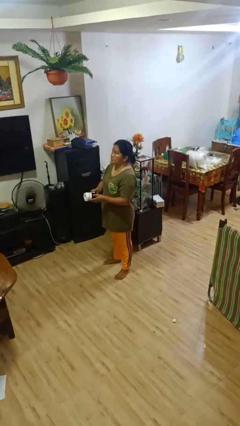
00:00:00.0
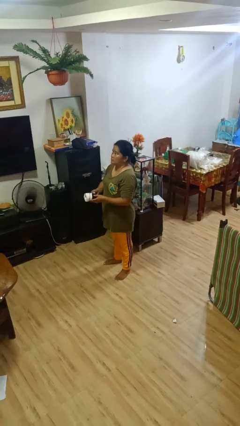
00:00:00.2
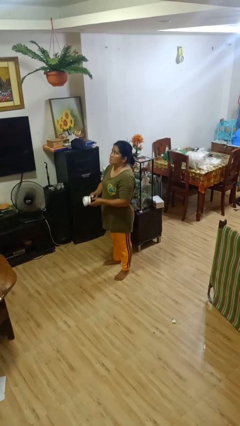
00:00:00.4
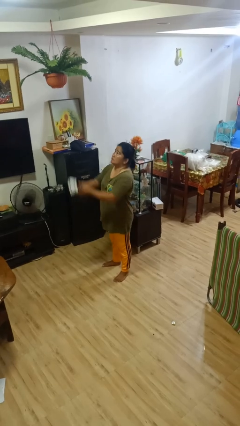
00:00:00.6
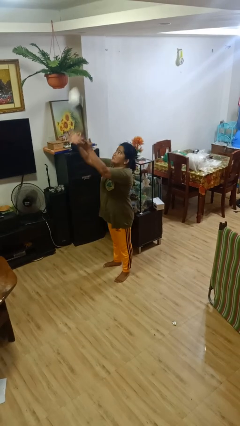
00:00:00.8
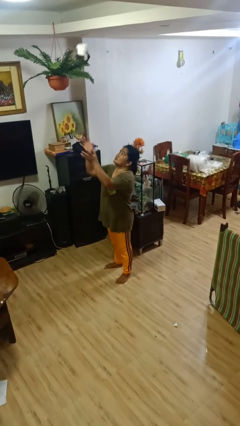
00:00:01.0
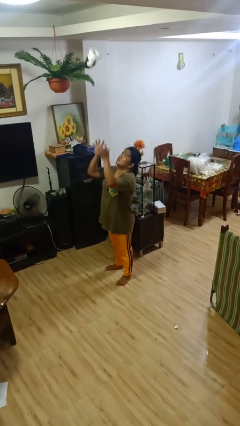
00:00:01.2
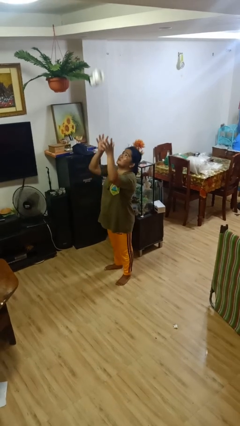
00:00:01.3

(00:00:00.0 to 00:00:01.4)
person drops object

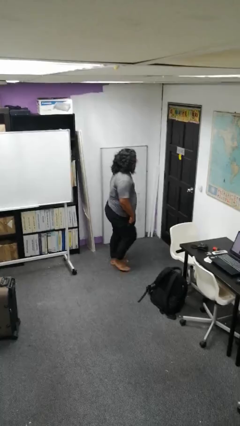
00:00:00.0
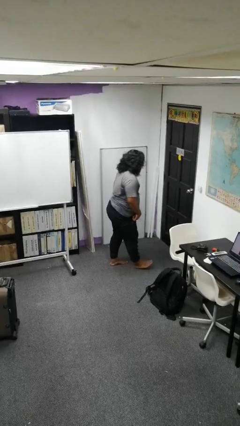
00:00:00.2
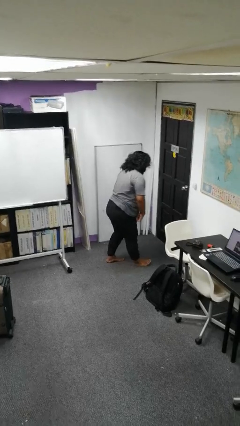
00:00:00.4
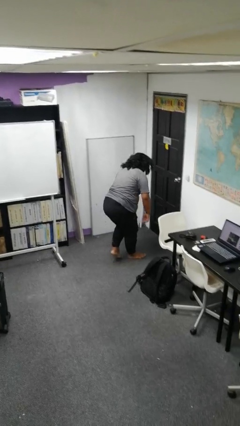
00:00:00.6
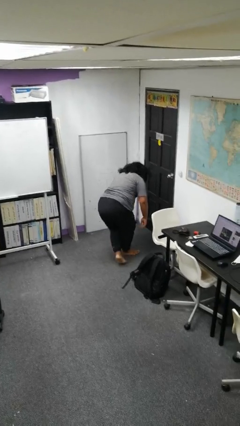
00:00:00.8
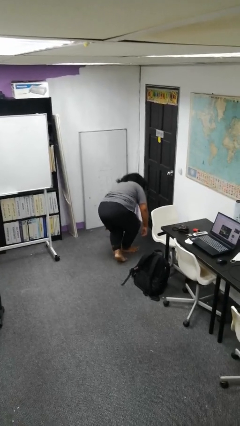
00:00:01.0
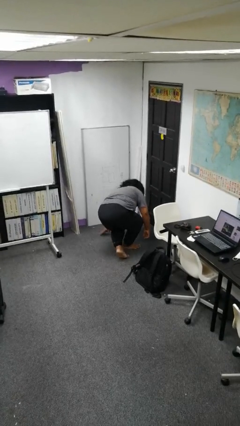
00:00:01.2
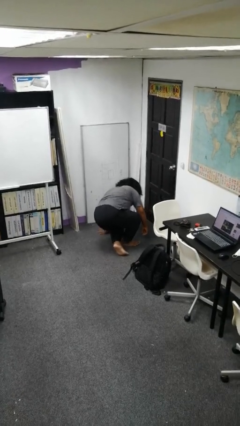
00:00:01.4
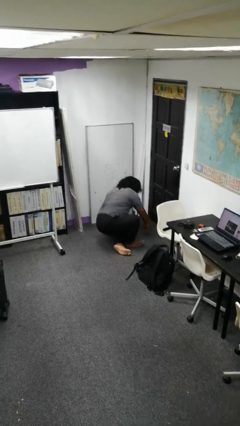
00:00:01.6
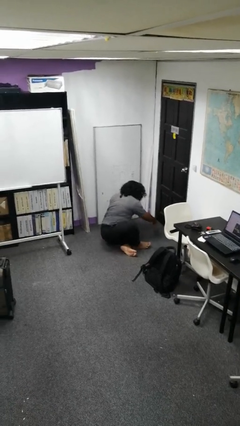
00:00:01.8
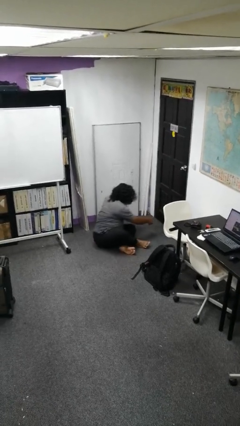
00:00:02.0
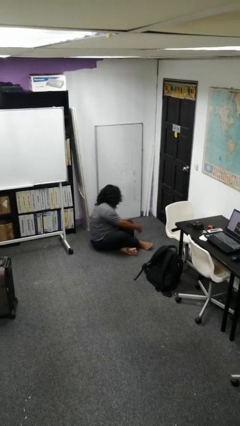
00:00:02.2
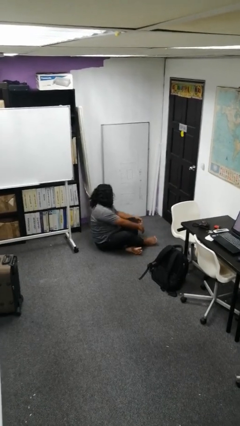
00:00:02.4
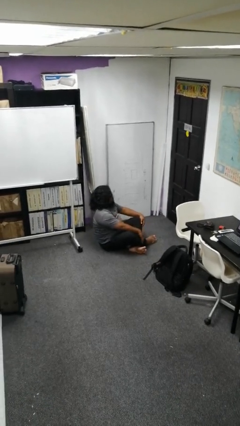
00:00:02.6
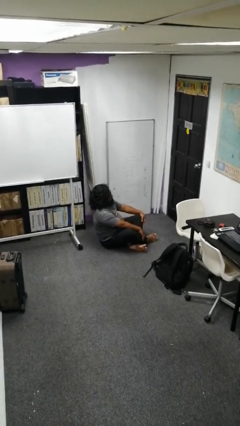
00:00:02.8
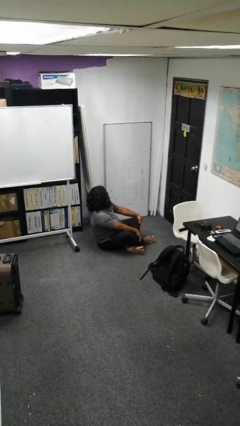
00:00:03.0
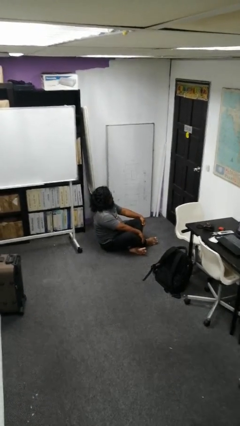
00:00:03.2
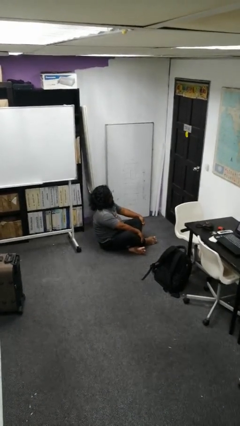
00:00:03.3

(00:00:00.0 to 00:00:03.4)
person sits crisscross

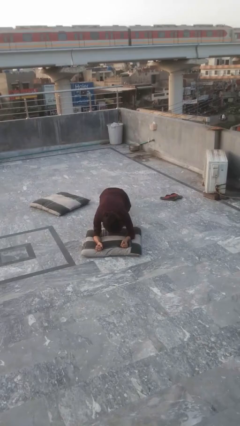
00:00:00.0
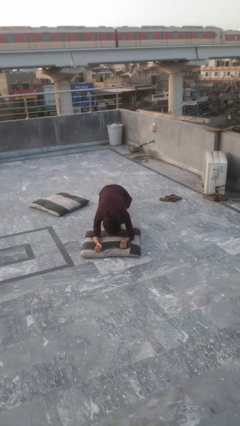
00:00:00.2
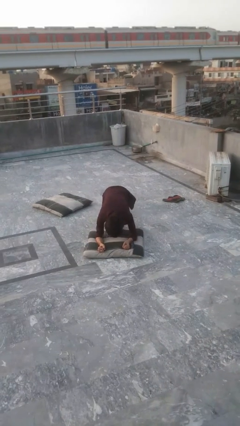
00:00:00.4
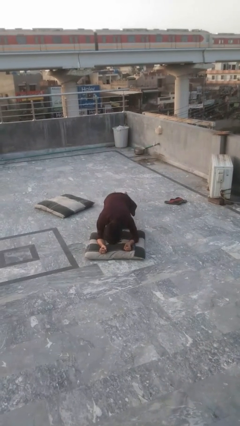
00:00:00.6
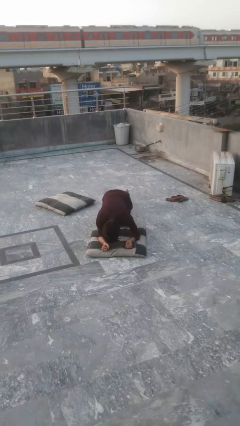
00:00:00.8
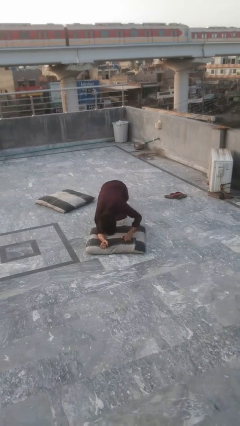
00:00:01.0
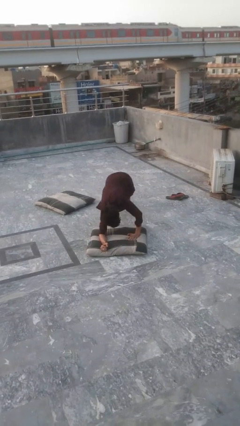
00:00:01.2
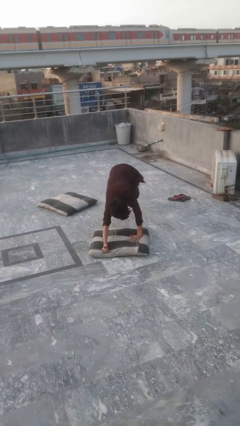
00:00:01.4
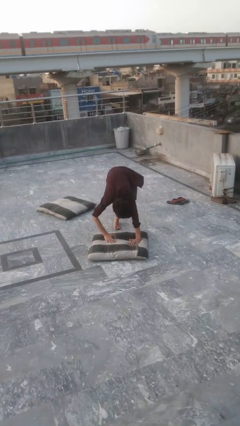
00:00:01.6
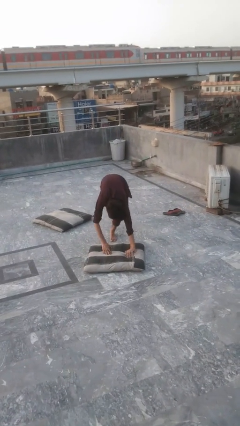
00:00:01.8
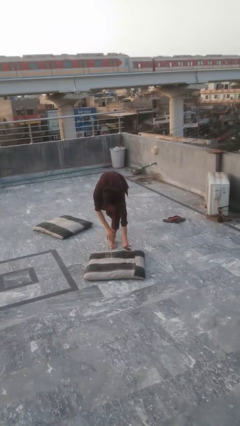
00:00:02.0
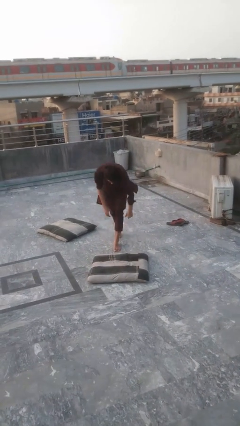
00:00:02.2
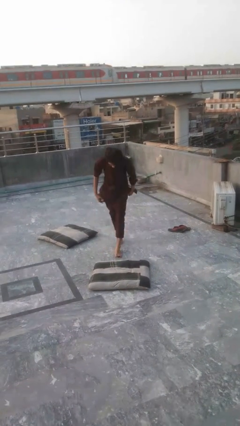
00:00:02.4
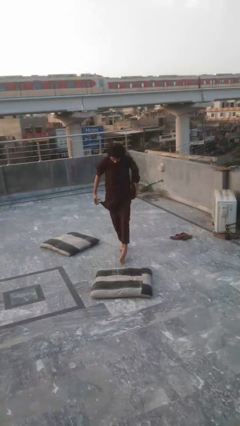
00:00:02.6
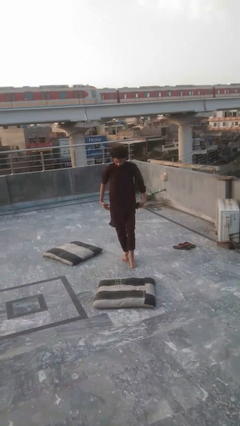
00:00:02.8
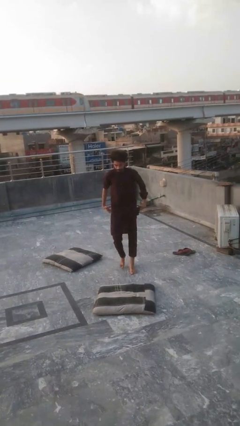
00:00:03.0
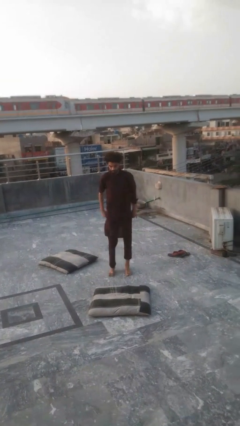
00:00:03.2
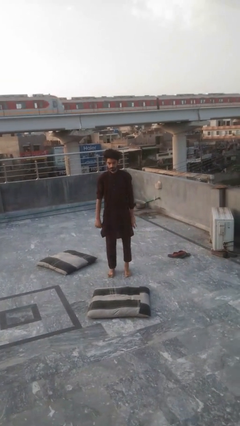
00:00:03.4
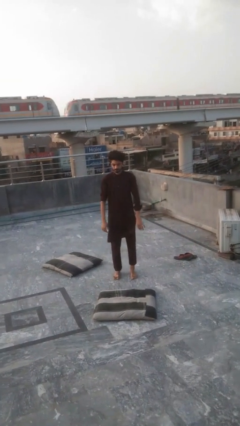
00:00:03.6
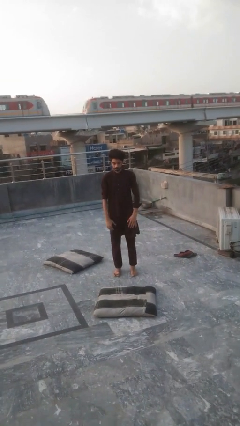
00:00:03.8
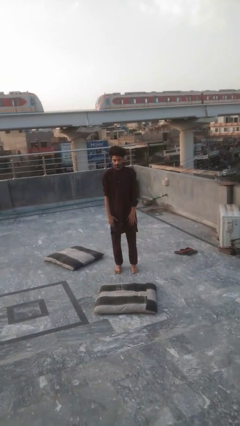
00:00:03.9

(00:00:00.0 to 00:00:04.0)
person stands up from floor

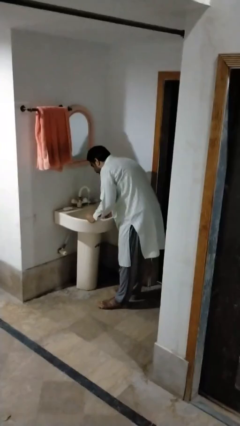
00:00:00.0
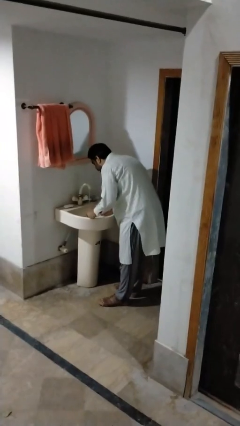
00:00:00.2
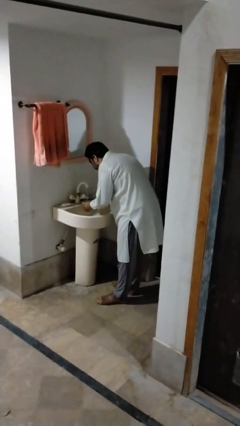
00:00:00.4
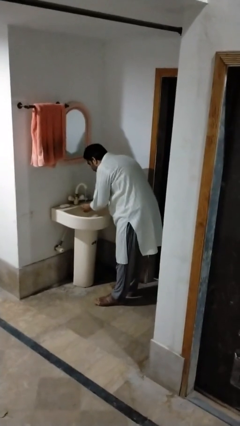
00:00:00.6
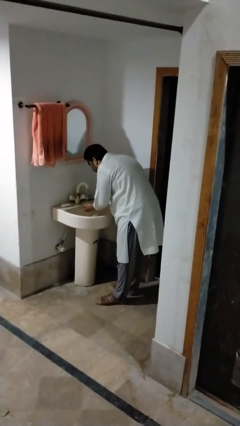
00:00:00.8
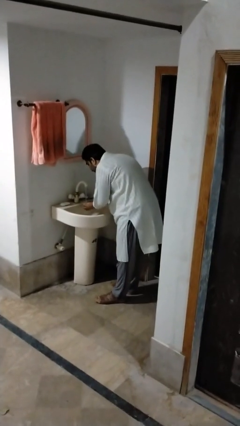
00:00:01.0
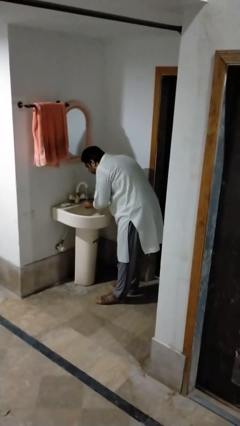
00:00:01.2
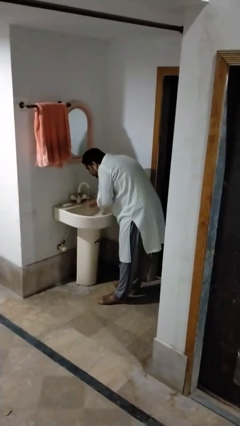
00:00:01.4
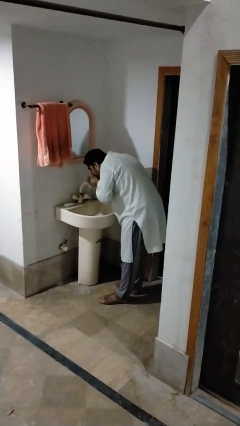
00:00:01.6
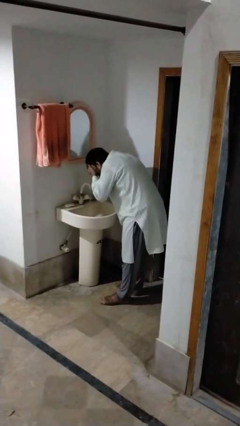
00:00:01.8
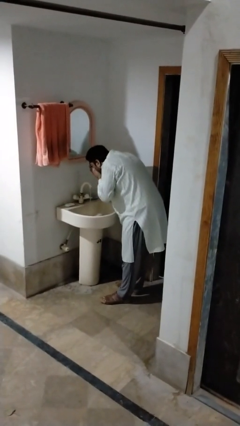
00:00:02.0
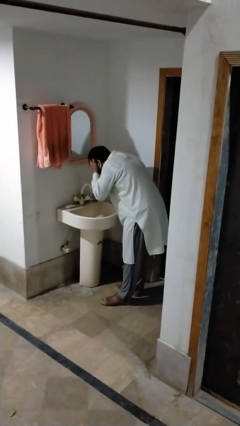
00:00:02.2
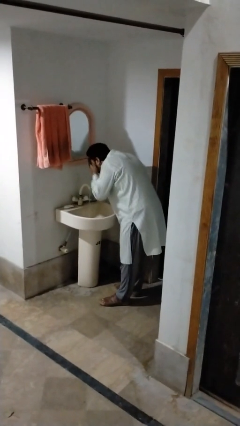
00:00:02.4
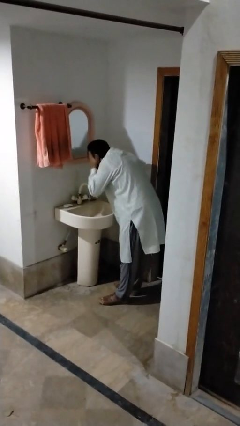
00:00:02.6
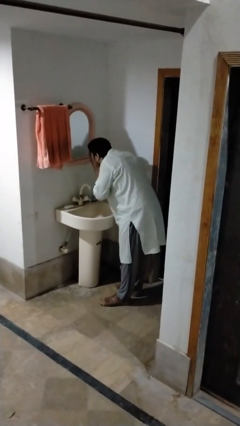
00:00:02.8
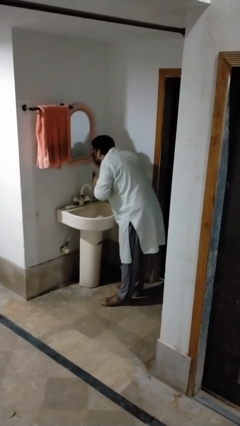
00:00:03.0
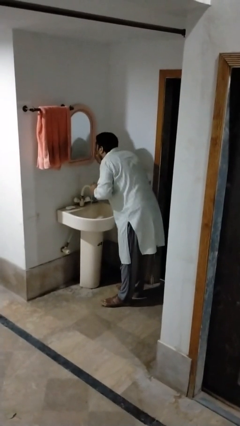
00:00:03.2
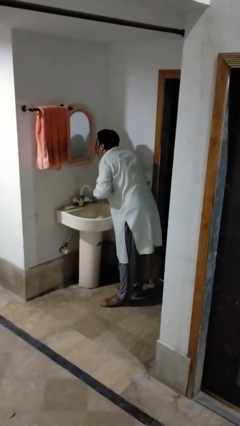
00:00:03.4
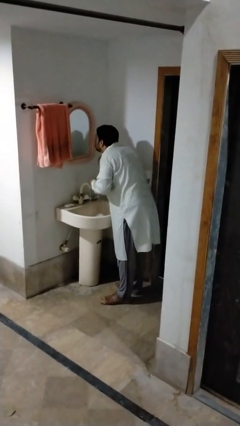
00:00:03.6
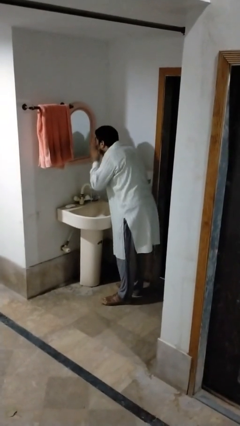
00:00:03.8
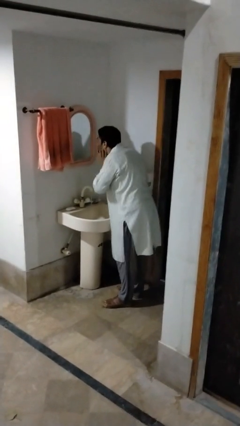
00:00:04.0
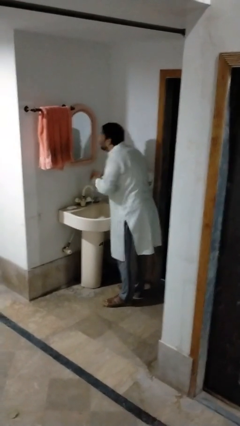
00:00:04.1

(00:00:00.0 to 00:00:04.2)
person washes face

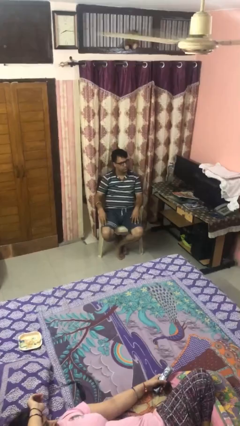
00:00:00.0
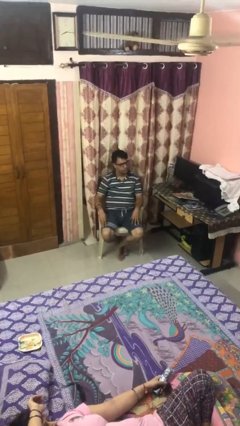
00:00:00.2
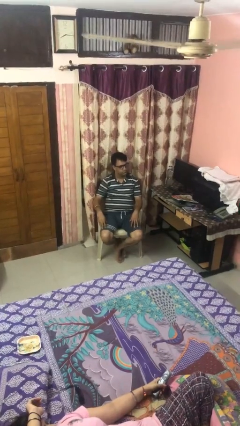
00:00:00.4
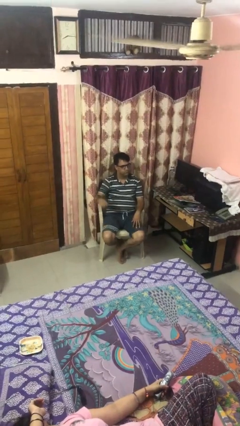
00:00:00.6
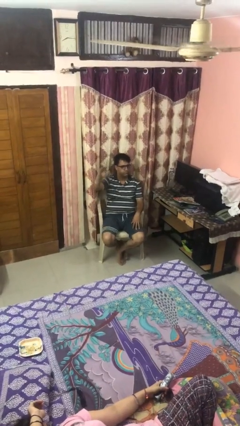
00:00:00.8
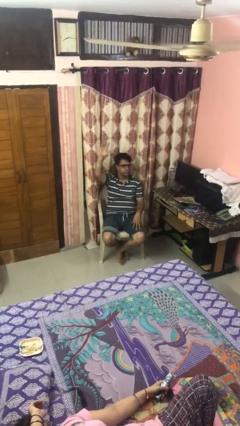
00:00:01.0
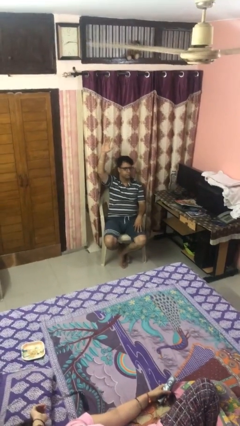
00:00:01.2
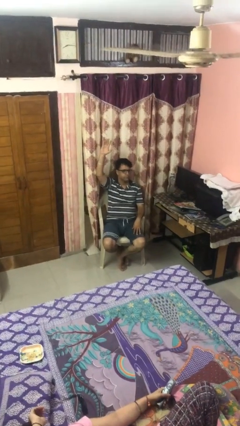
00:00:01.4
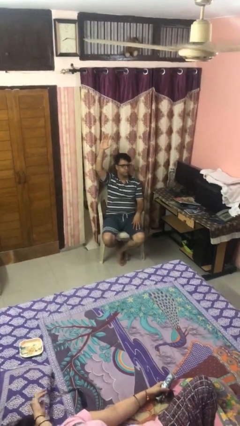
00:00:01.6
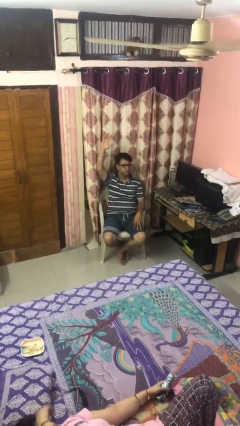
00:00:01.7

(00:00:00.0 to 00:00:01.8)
person gestures raise hand

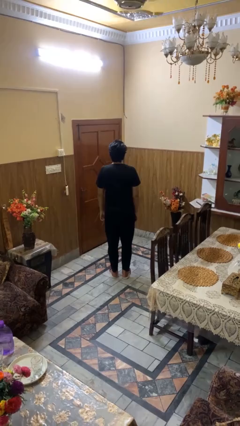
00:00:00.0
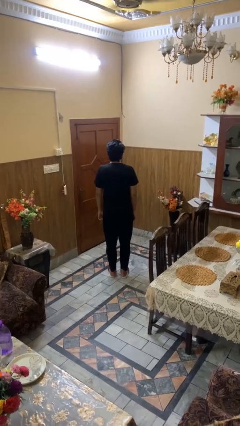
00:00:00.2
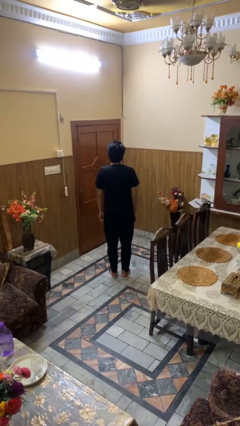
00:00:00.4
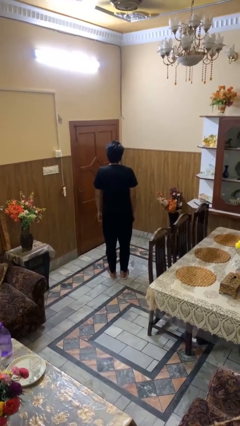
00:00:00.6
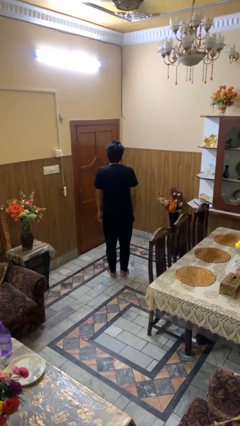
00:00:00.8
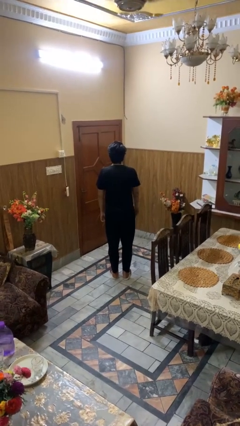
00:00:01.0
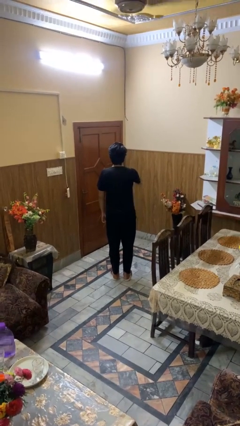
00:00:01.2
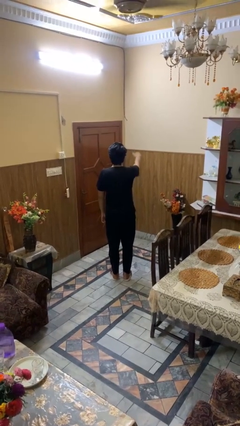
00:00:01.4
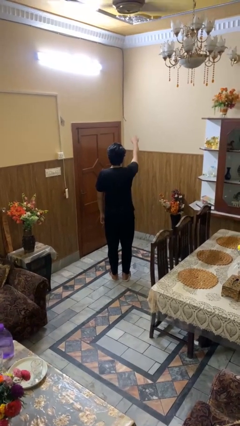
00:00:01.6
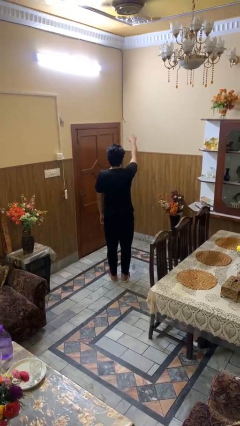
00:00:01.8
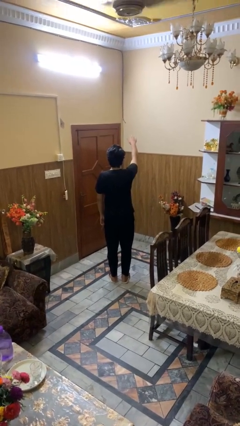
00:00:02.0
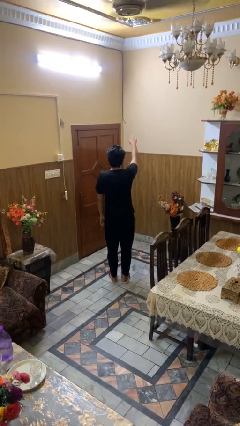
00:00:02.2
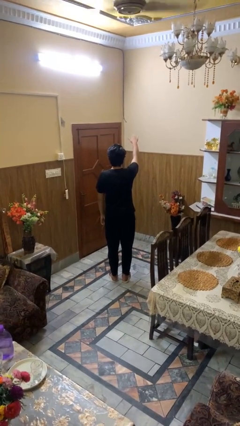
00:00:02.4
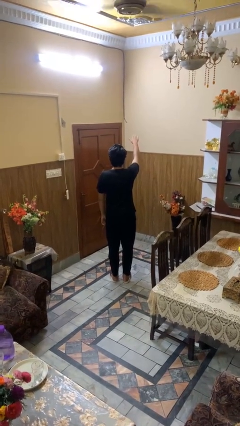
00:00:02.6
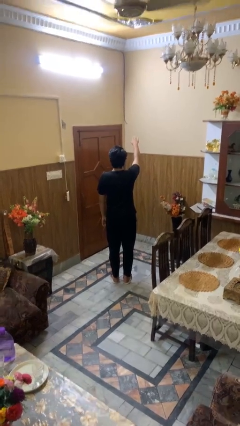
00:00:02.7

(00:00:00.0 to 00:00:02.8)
person gestures swipe up

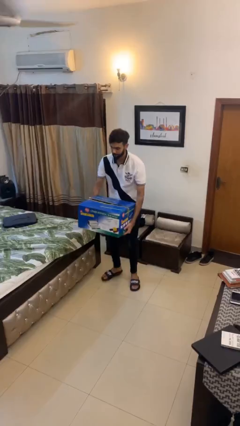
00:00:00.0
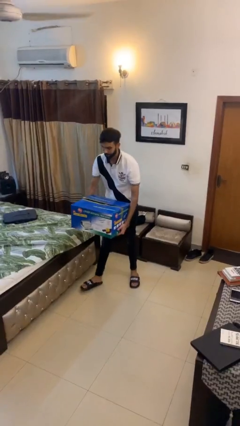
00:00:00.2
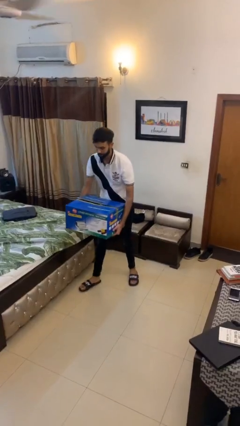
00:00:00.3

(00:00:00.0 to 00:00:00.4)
person carries heavy object
